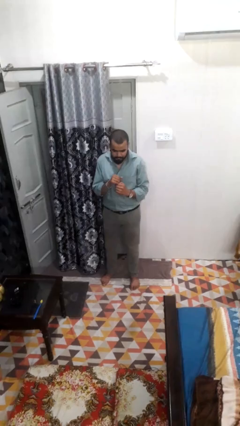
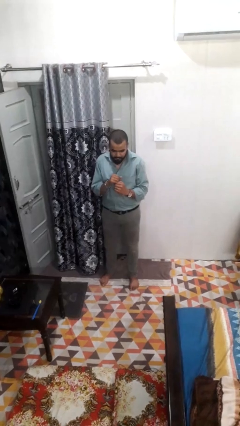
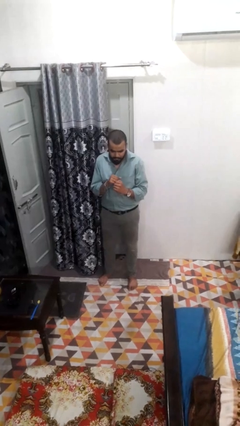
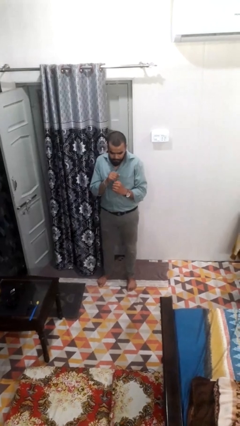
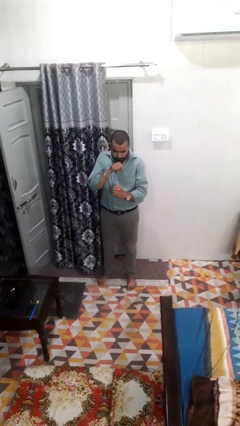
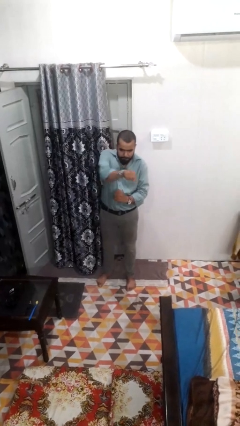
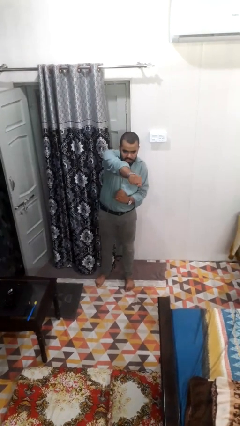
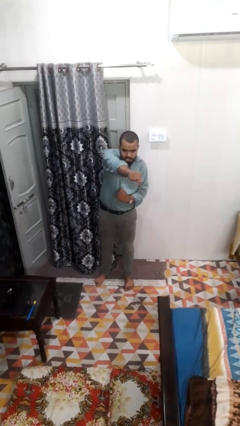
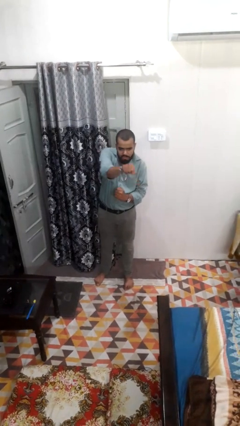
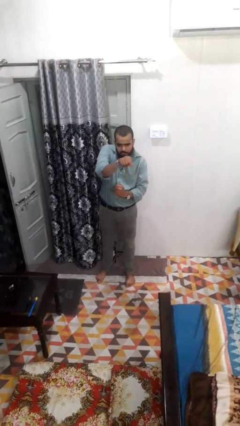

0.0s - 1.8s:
person punches

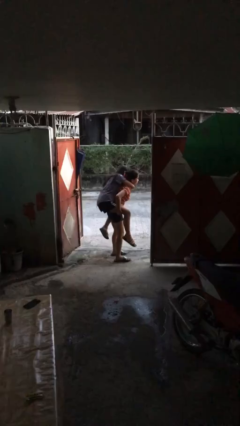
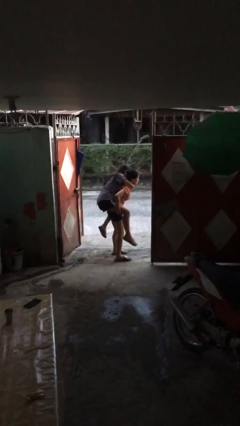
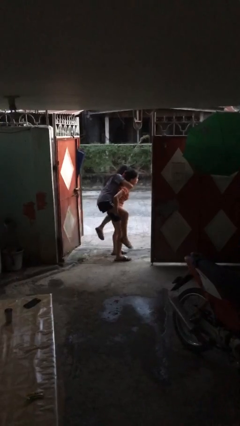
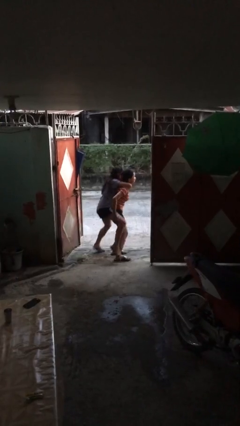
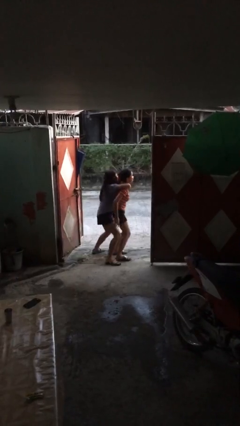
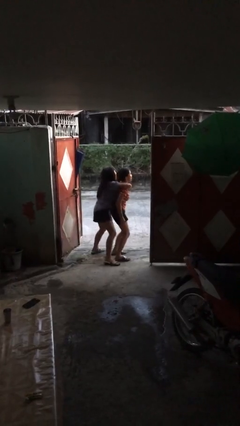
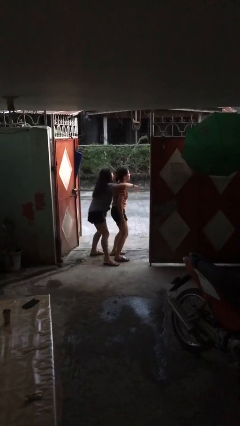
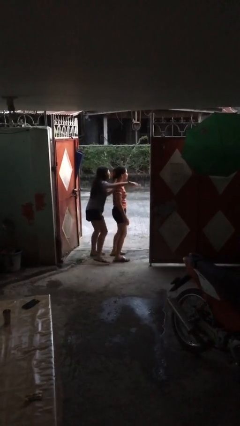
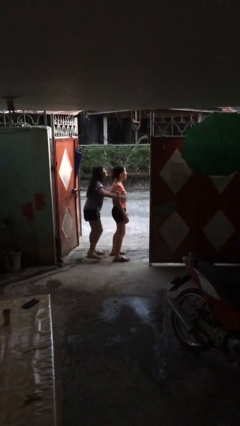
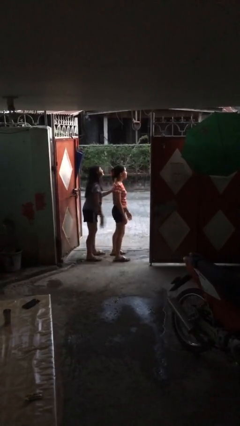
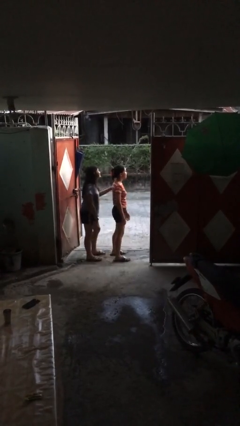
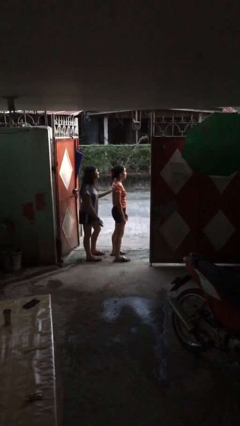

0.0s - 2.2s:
person puts down person

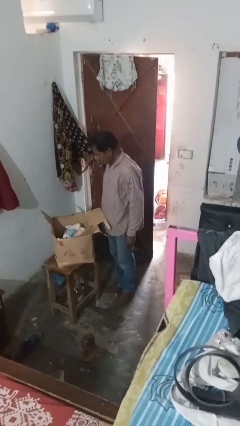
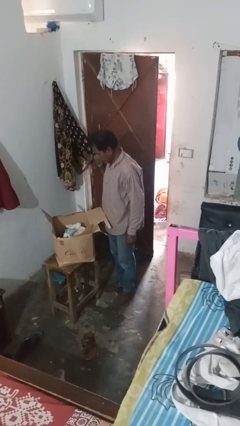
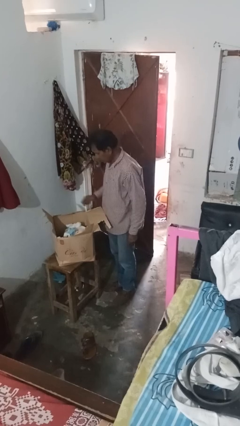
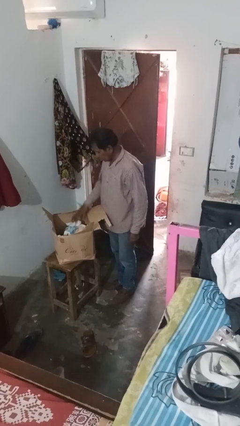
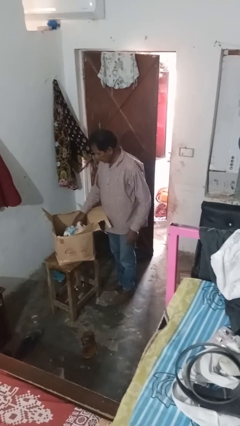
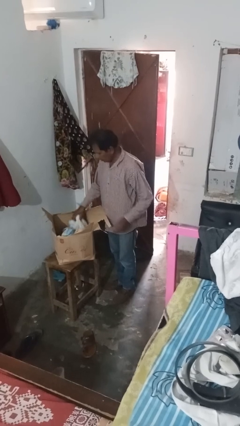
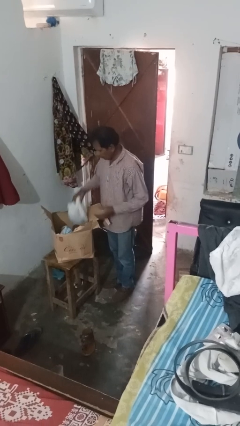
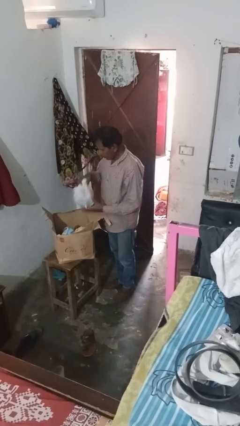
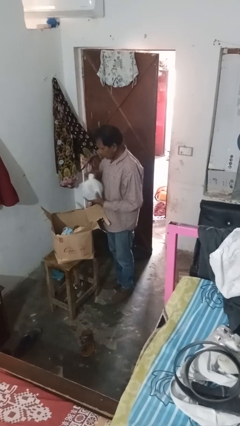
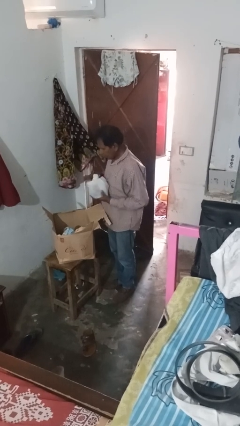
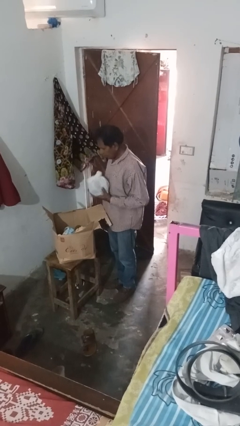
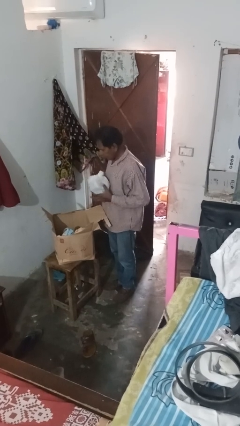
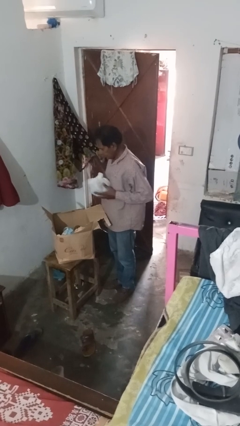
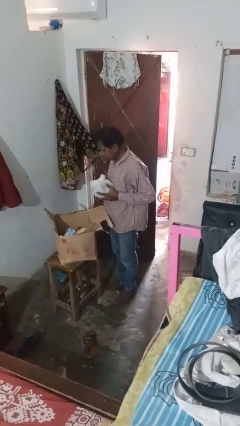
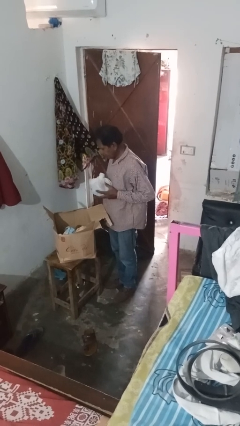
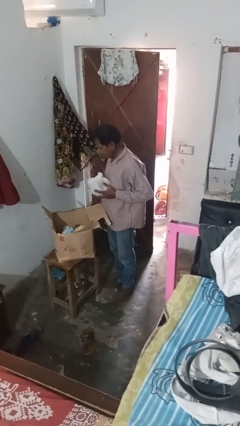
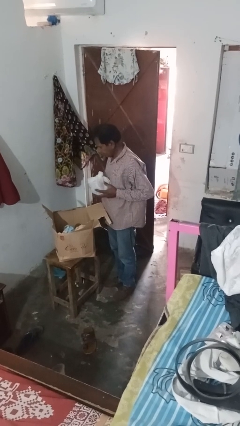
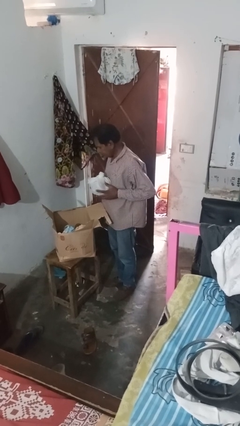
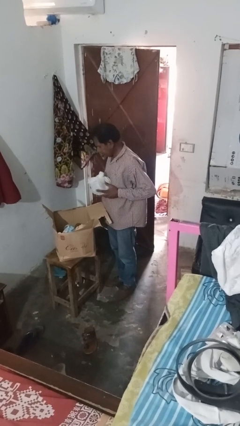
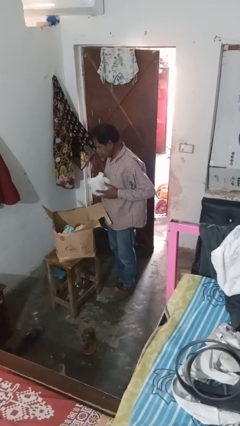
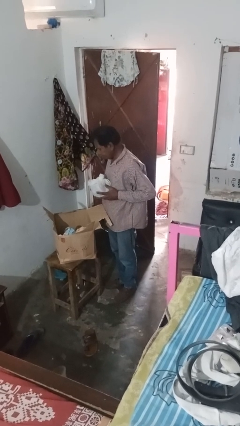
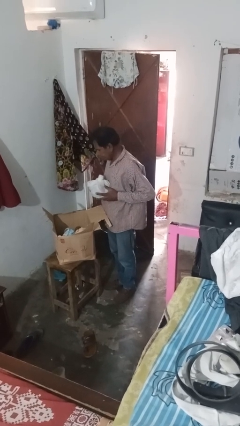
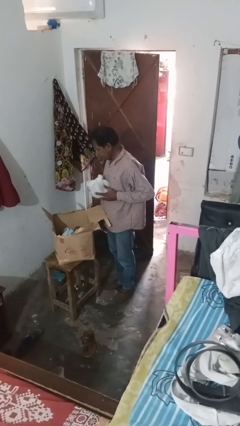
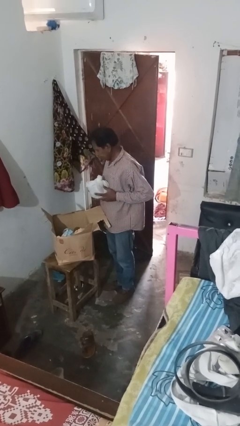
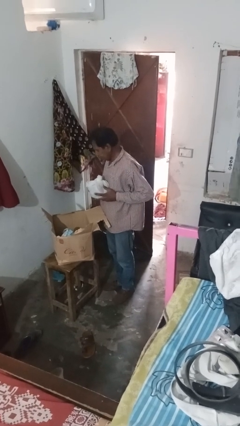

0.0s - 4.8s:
person takes object from box

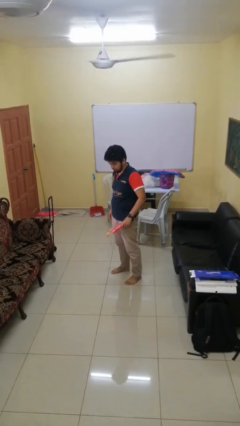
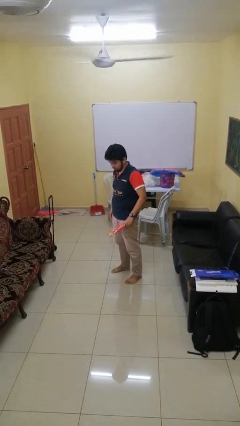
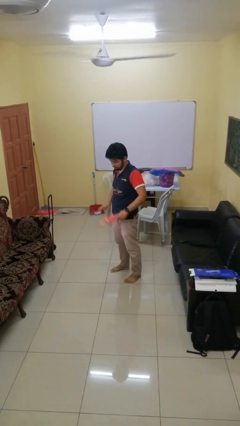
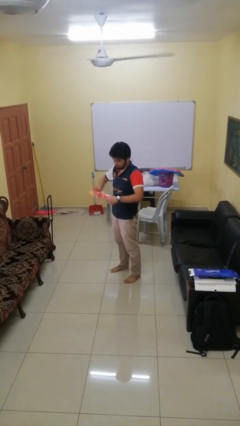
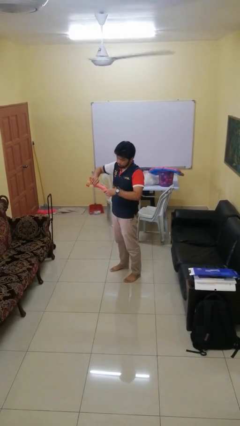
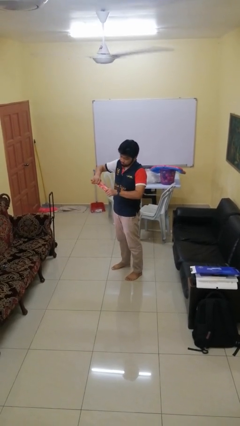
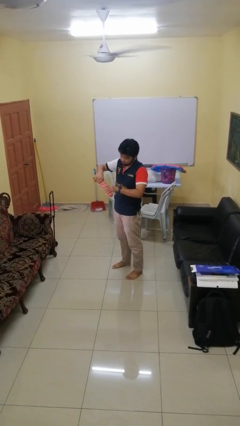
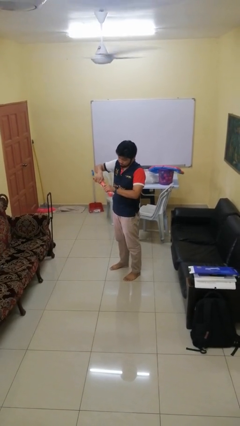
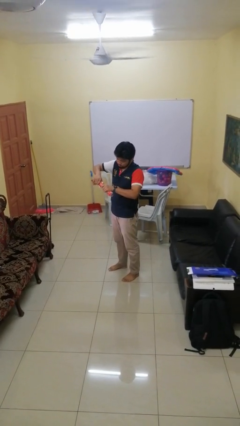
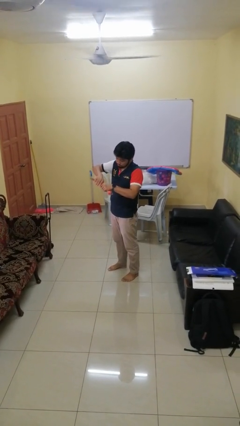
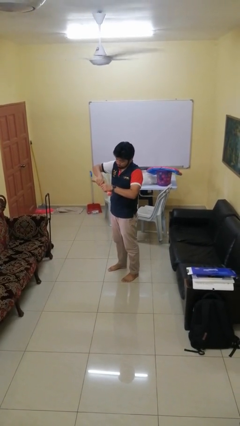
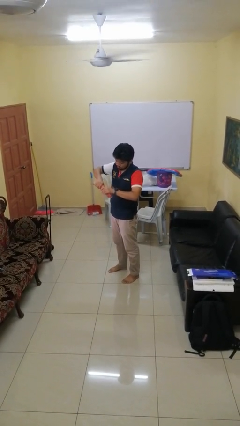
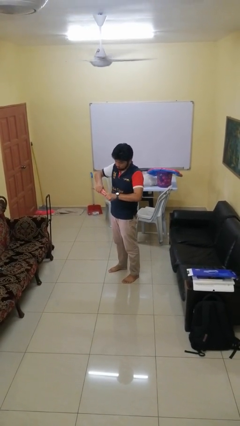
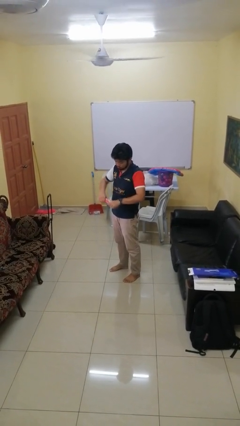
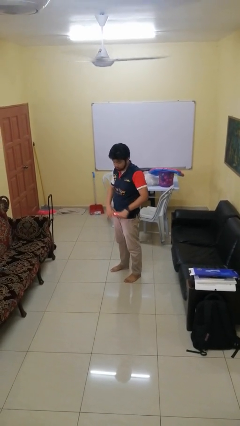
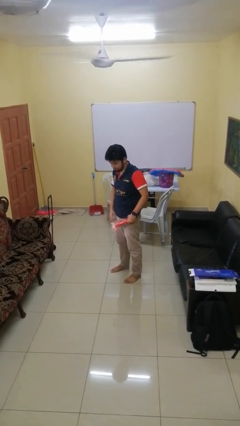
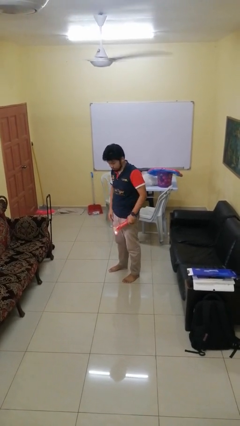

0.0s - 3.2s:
person squeezes object

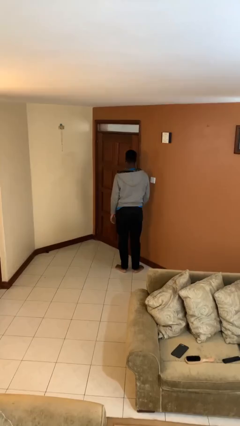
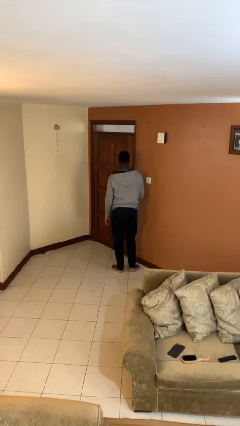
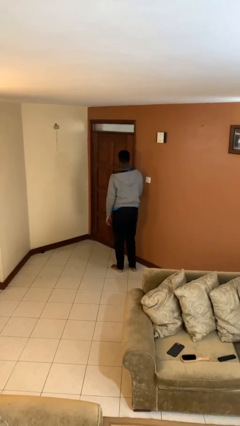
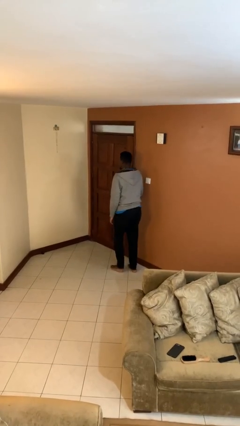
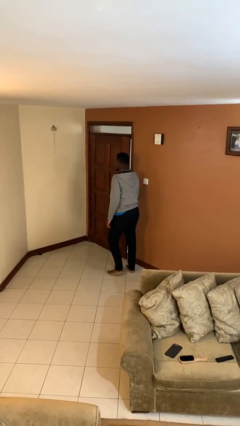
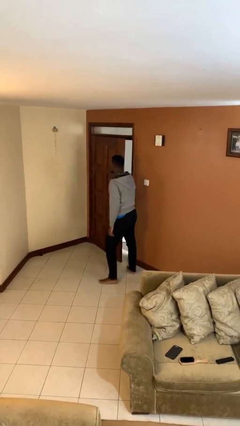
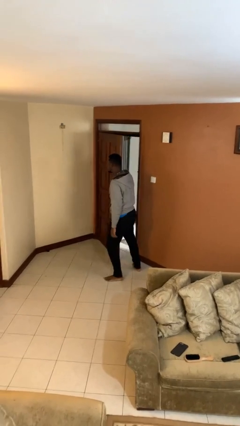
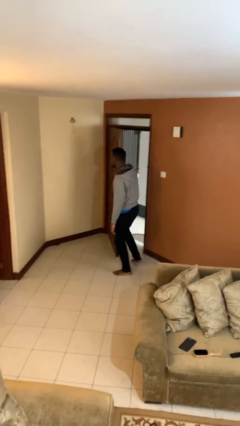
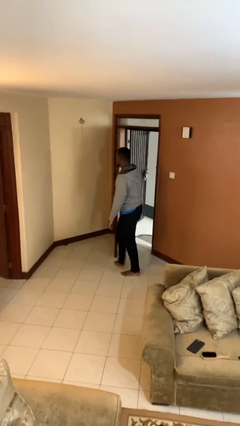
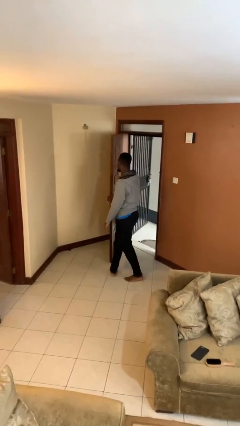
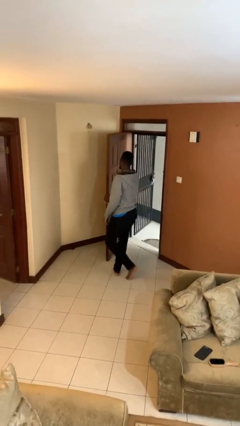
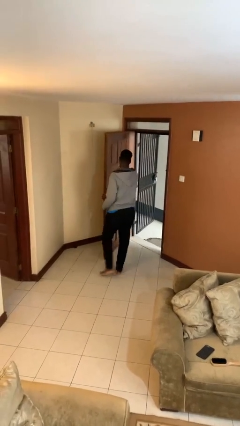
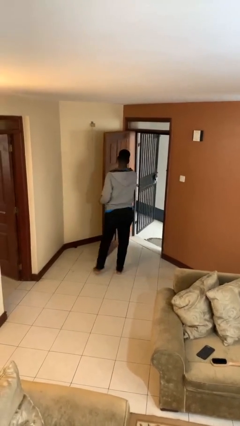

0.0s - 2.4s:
person opens facility door

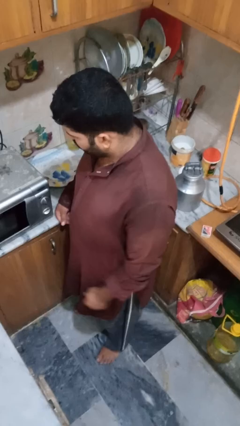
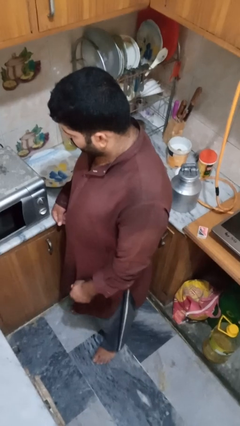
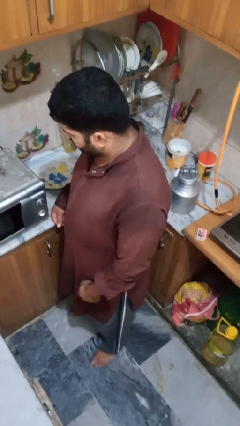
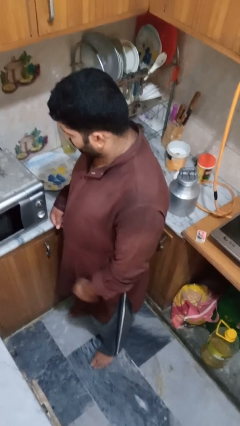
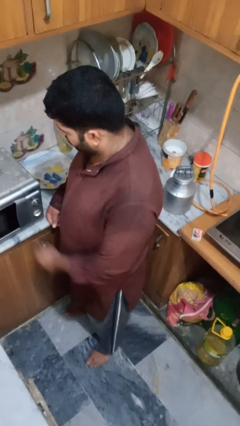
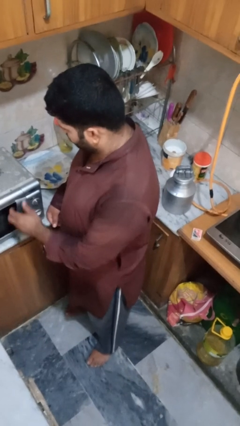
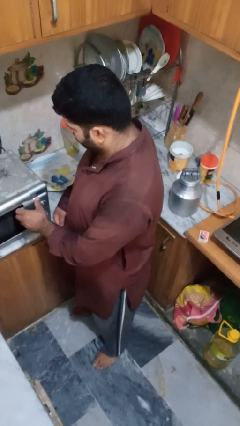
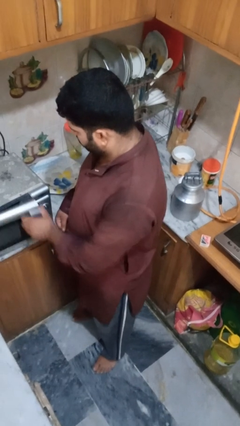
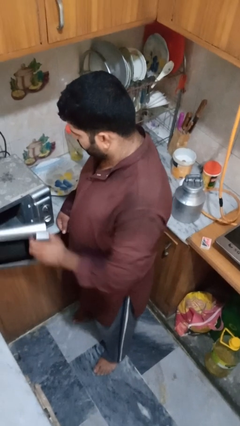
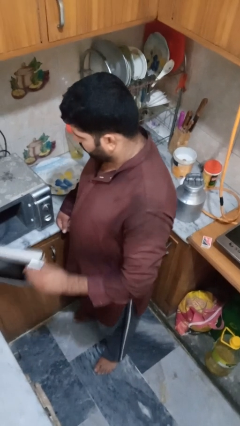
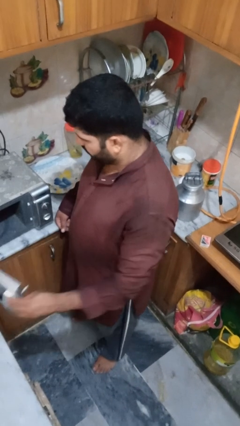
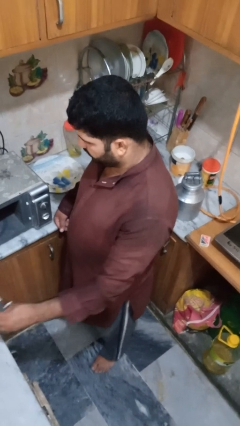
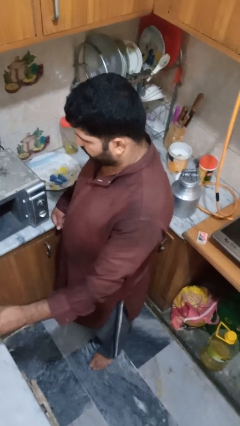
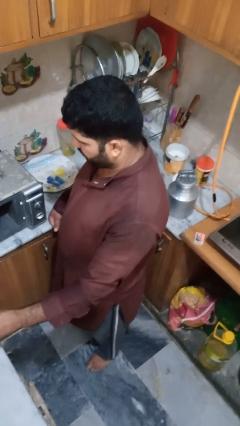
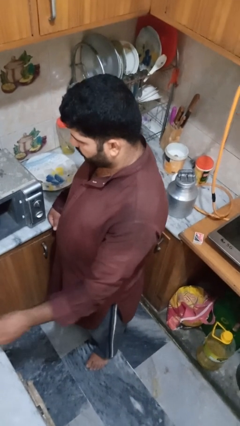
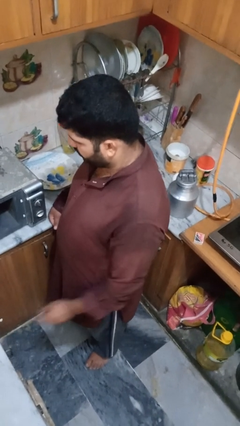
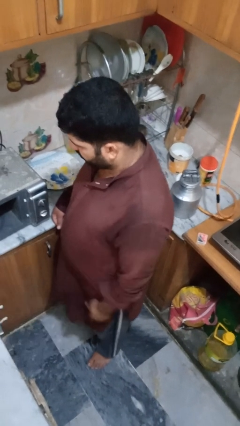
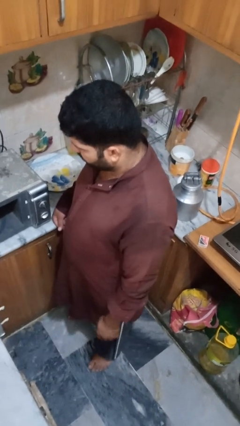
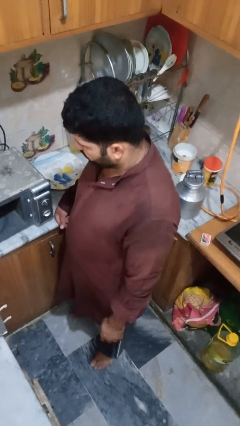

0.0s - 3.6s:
person opens oven door
